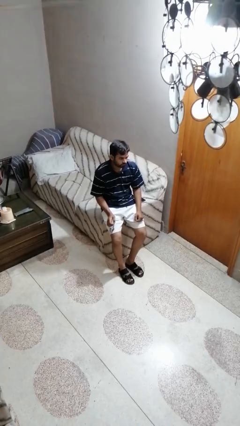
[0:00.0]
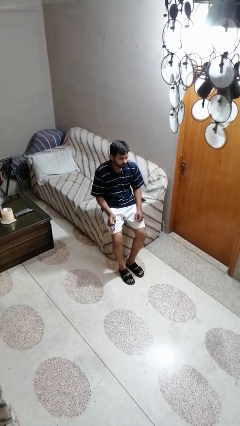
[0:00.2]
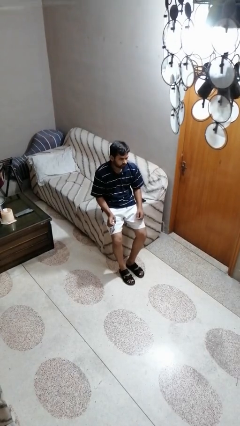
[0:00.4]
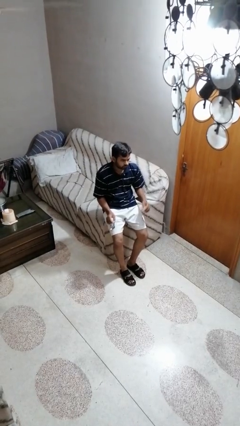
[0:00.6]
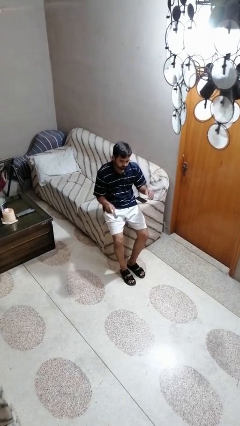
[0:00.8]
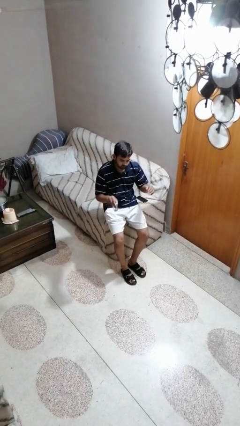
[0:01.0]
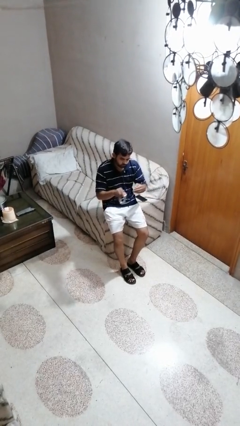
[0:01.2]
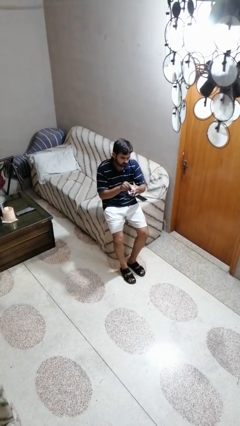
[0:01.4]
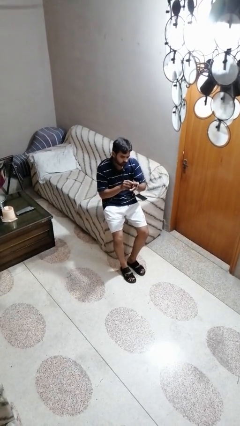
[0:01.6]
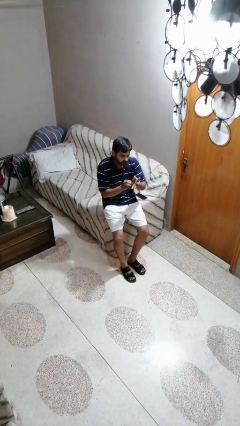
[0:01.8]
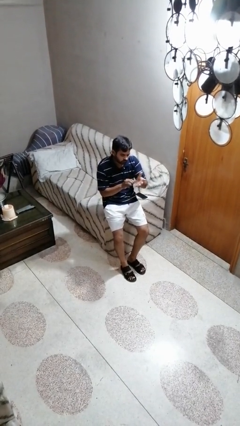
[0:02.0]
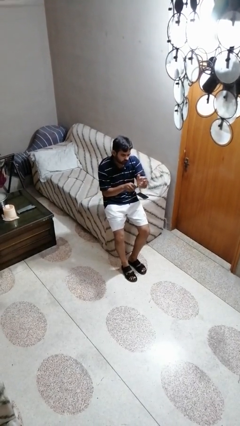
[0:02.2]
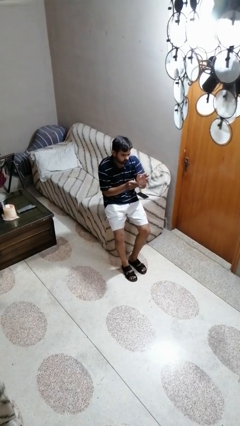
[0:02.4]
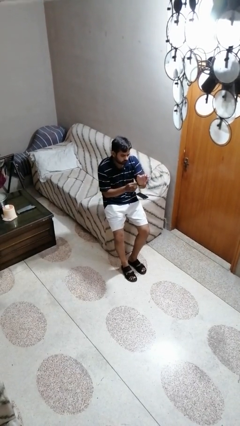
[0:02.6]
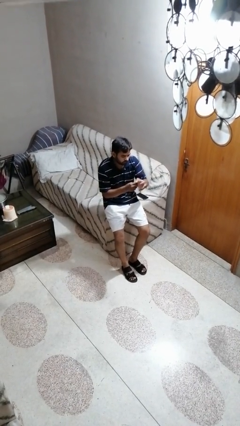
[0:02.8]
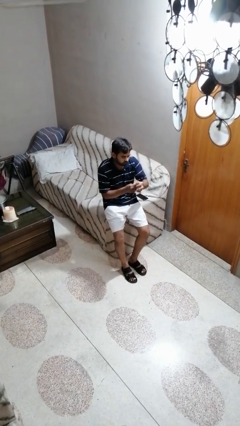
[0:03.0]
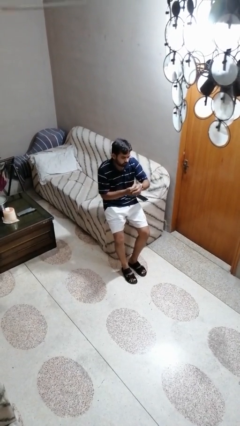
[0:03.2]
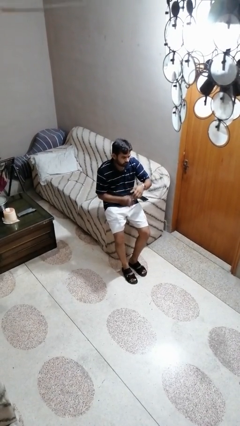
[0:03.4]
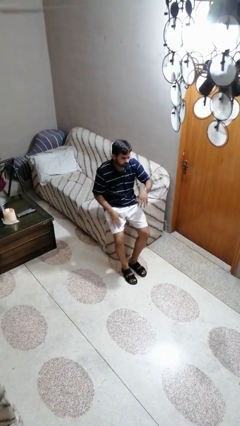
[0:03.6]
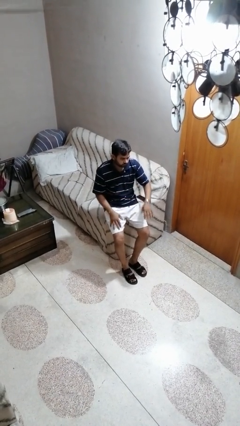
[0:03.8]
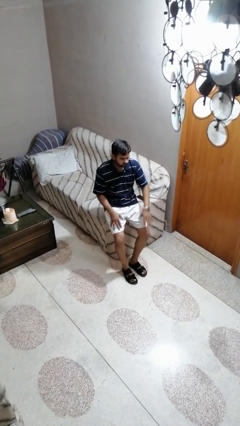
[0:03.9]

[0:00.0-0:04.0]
person puts on wristwatch

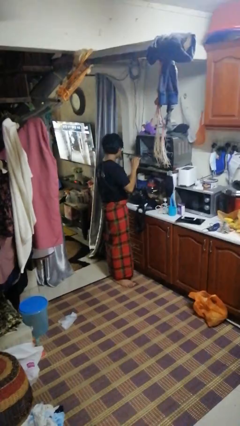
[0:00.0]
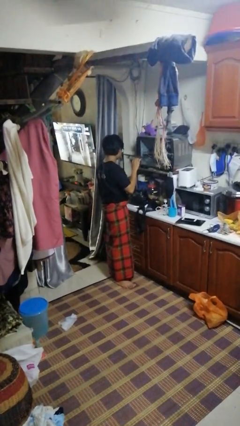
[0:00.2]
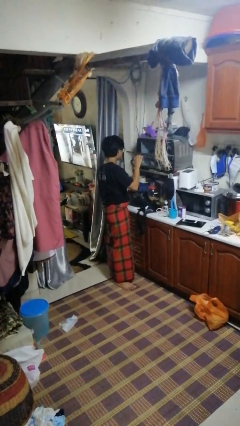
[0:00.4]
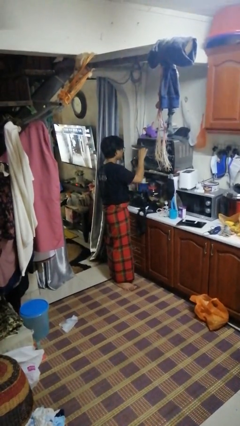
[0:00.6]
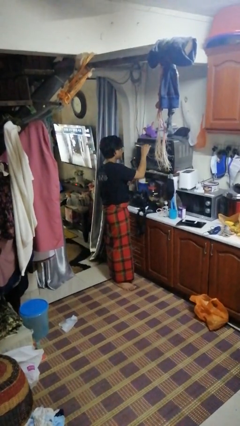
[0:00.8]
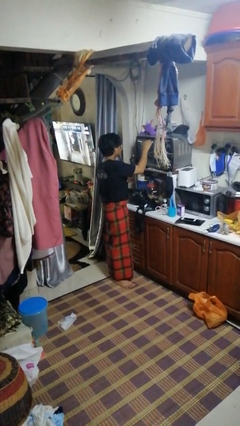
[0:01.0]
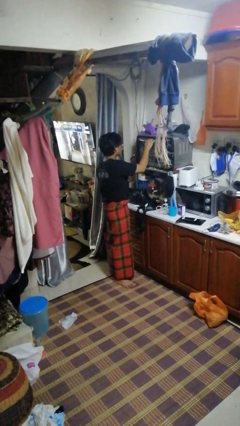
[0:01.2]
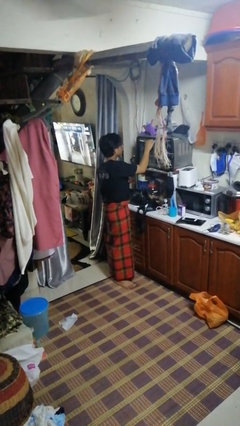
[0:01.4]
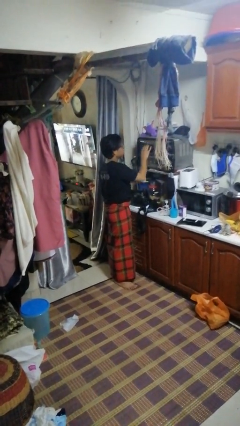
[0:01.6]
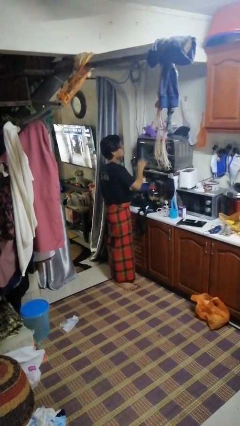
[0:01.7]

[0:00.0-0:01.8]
person closes oven door

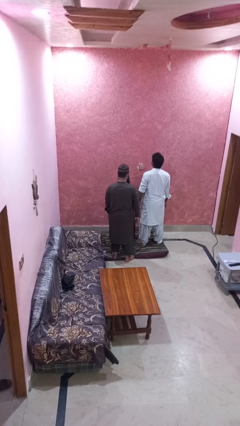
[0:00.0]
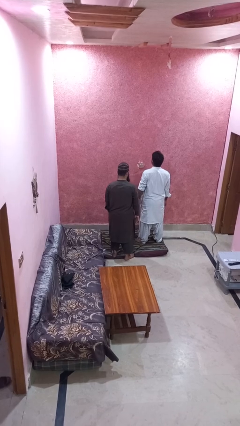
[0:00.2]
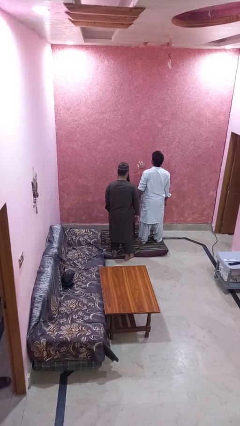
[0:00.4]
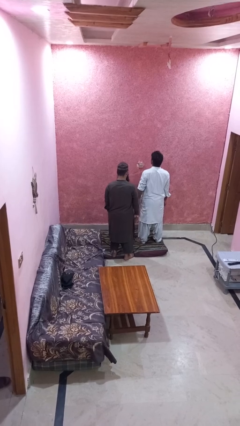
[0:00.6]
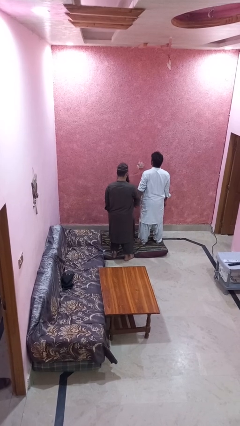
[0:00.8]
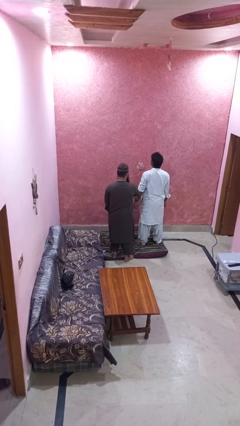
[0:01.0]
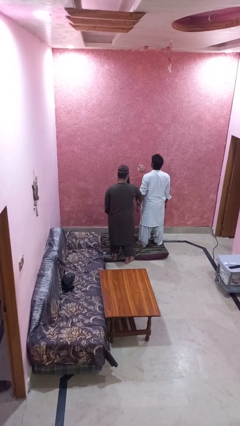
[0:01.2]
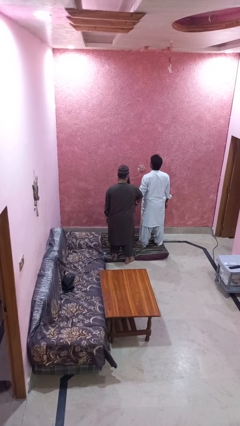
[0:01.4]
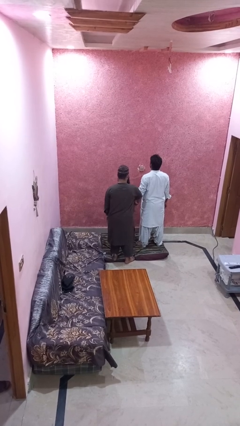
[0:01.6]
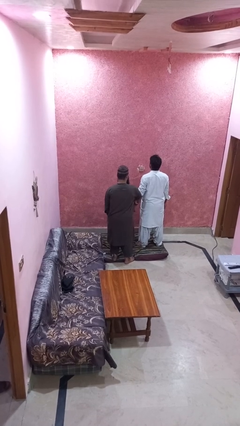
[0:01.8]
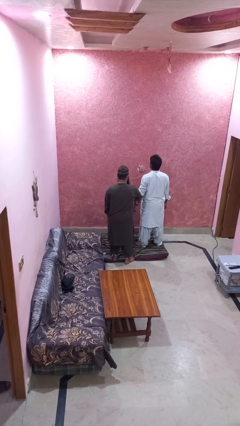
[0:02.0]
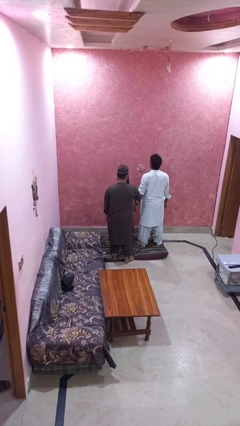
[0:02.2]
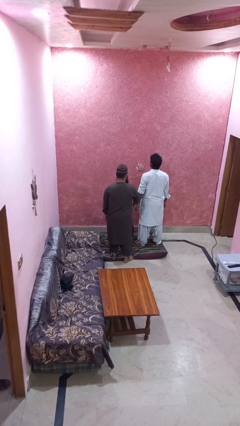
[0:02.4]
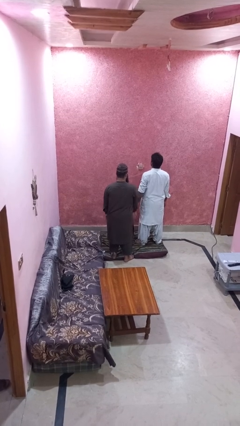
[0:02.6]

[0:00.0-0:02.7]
person grabs person by forearm

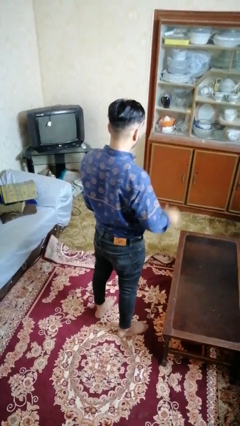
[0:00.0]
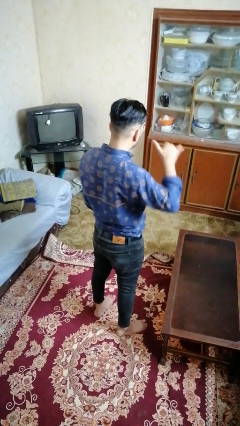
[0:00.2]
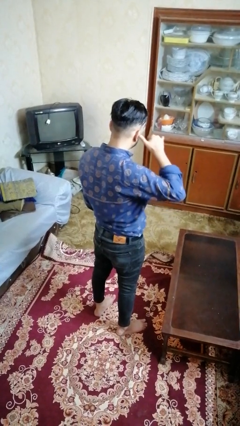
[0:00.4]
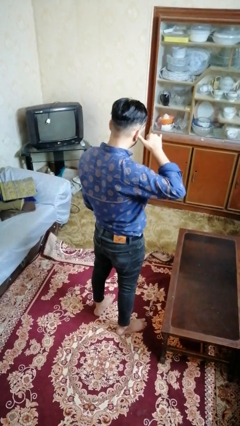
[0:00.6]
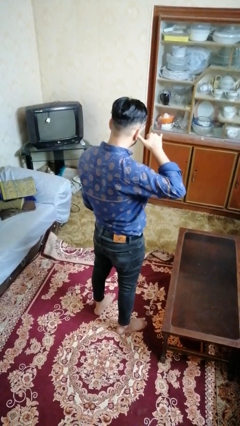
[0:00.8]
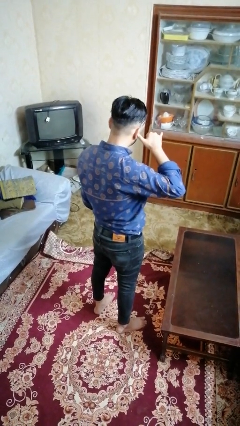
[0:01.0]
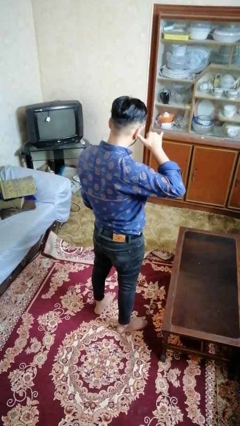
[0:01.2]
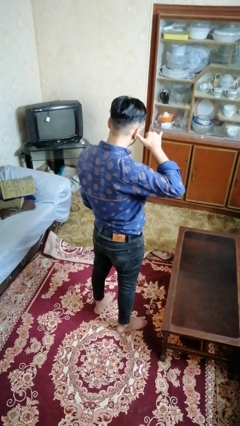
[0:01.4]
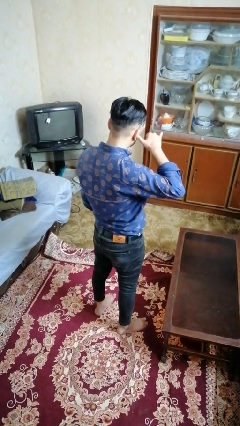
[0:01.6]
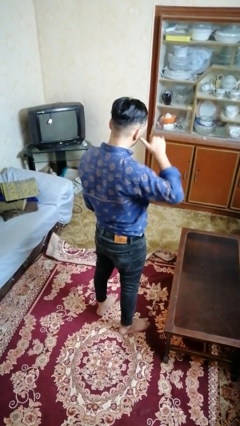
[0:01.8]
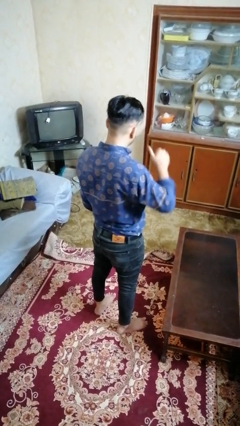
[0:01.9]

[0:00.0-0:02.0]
person gestures call me

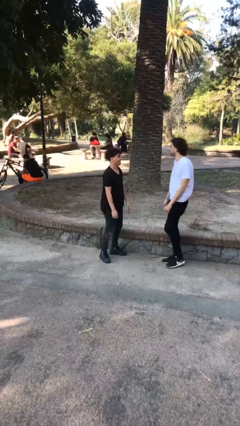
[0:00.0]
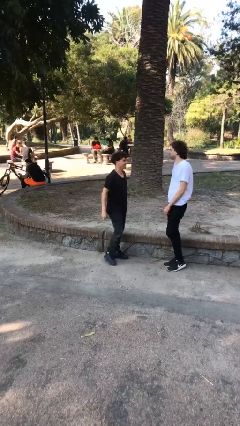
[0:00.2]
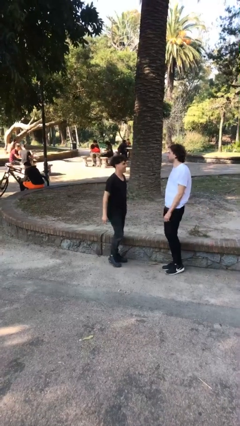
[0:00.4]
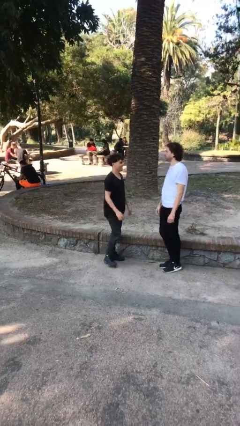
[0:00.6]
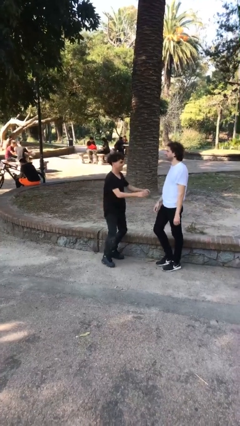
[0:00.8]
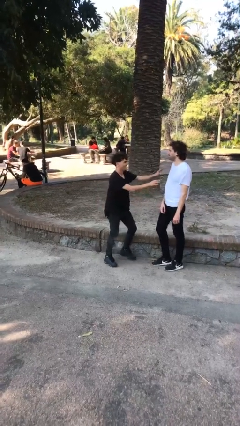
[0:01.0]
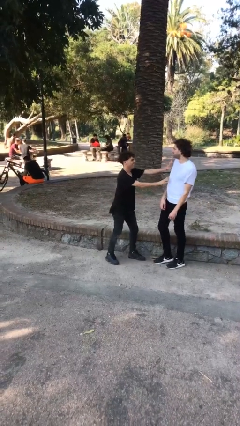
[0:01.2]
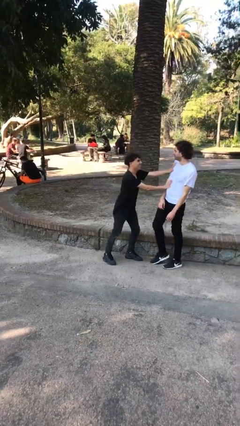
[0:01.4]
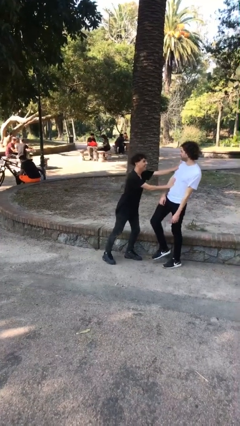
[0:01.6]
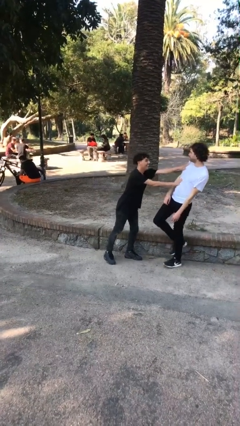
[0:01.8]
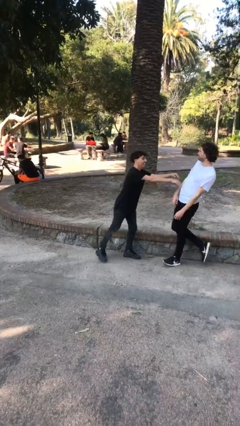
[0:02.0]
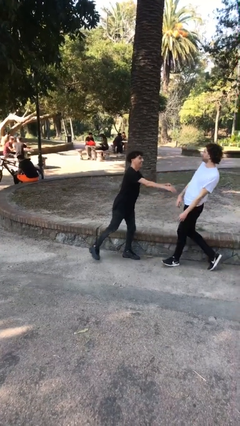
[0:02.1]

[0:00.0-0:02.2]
person shoves person

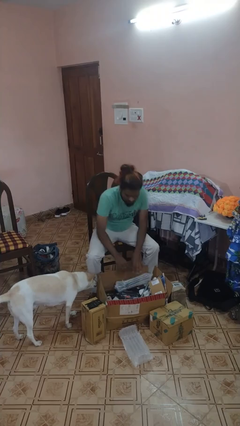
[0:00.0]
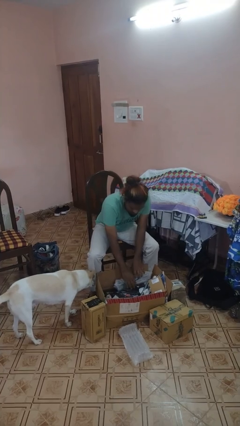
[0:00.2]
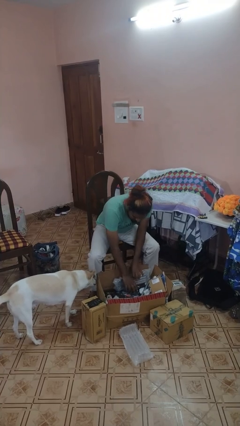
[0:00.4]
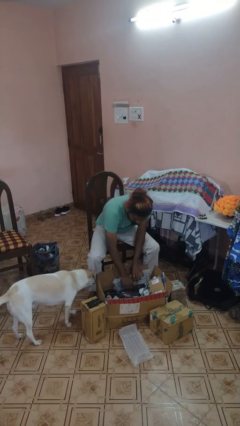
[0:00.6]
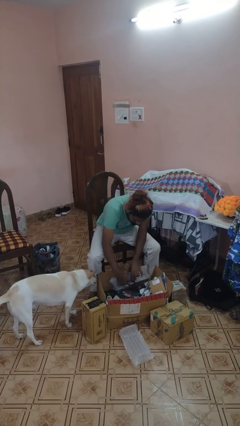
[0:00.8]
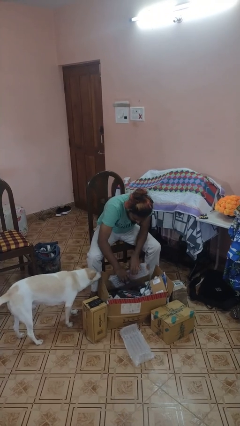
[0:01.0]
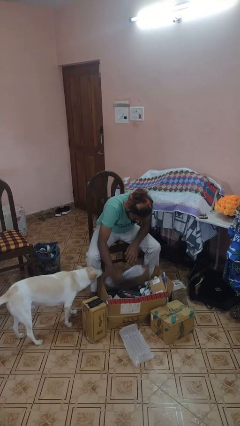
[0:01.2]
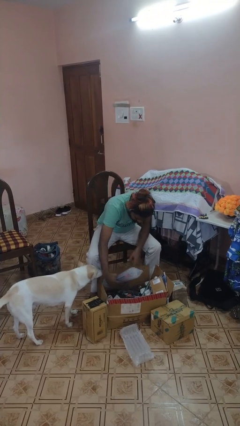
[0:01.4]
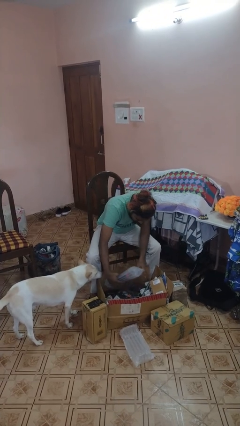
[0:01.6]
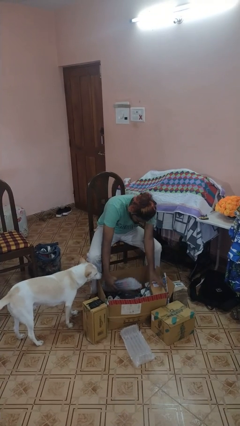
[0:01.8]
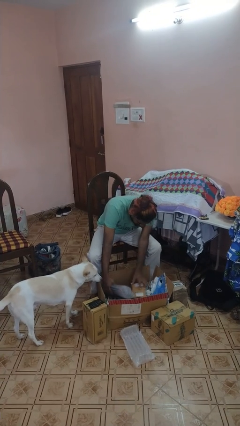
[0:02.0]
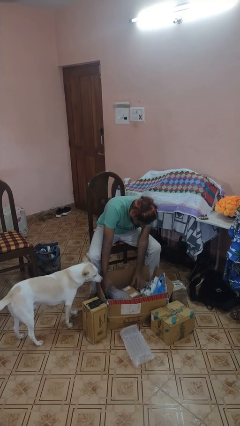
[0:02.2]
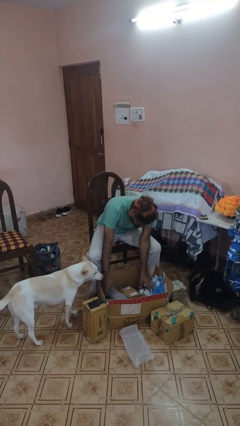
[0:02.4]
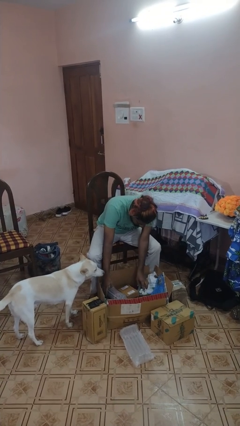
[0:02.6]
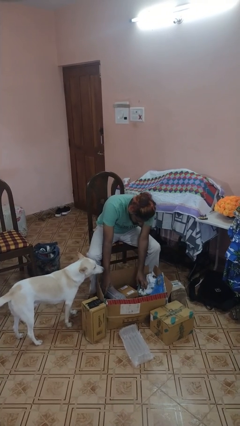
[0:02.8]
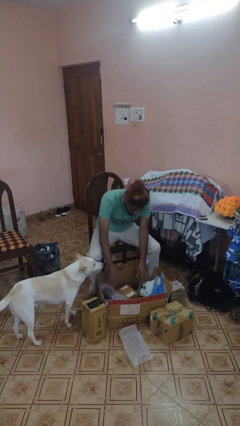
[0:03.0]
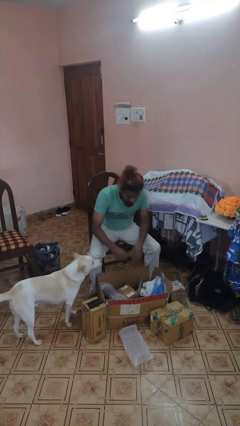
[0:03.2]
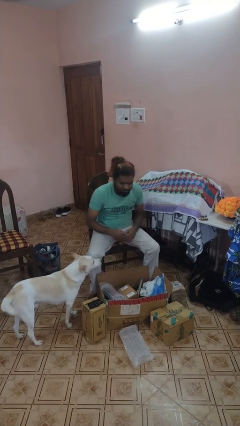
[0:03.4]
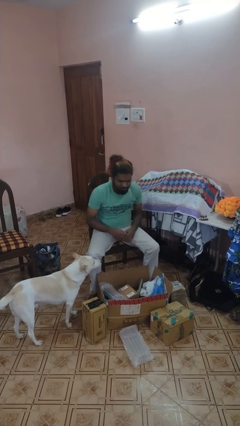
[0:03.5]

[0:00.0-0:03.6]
person searches in box

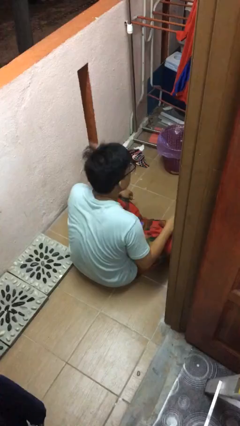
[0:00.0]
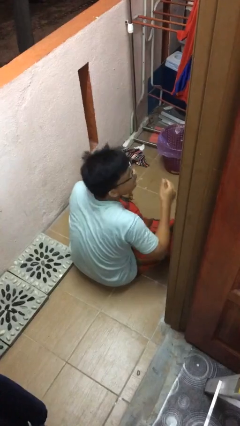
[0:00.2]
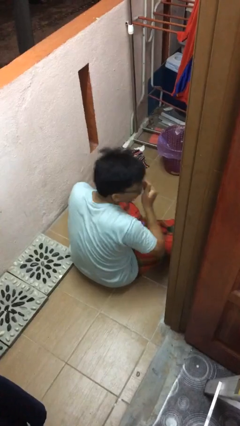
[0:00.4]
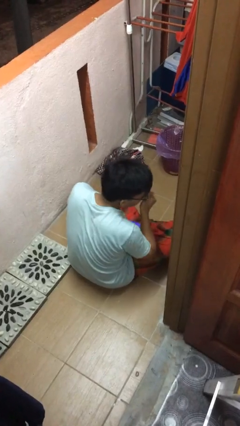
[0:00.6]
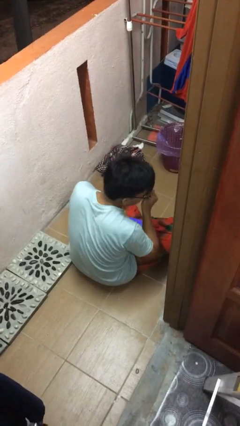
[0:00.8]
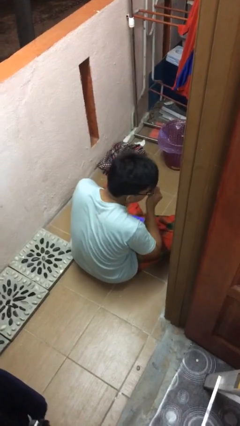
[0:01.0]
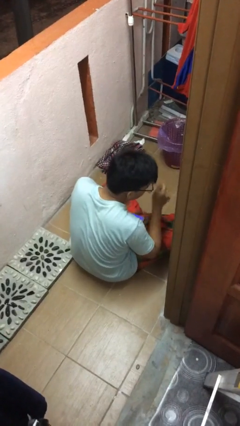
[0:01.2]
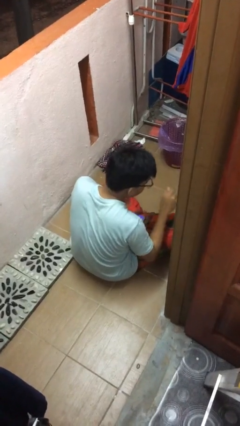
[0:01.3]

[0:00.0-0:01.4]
person sneezes into hand
